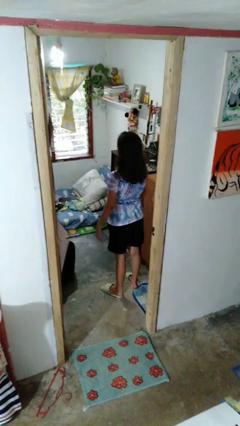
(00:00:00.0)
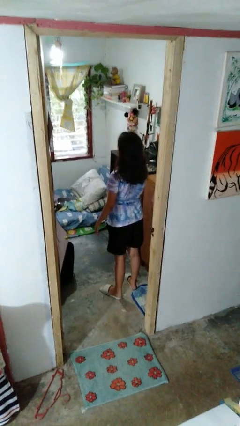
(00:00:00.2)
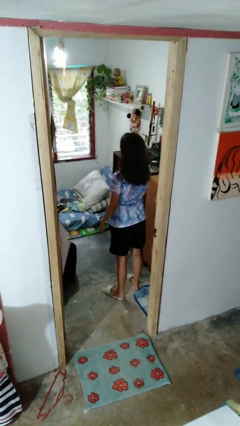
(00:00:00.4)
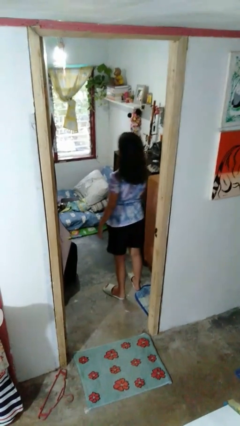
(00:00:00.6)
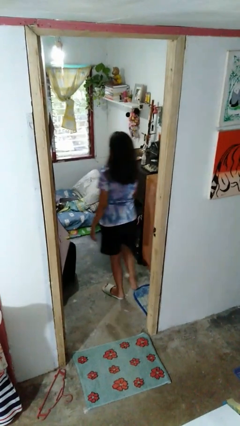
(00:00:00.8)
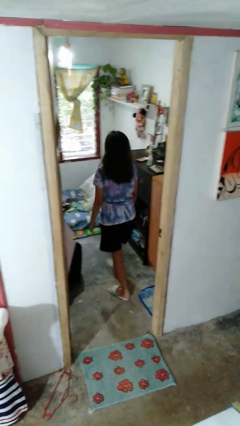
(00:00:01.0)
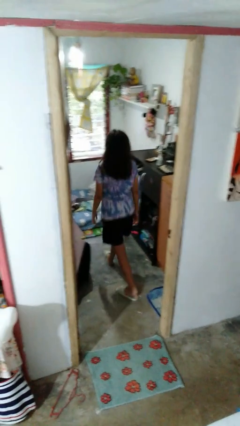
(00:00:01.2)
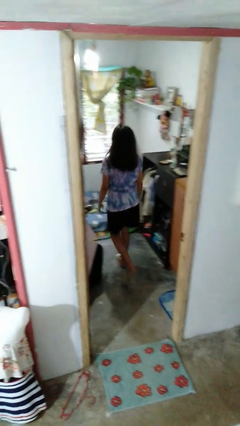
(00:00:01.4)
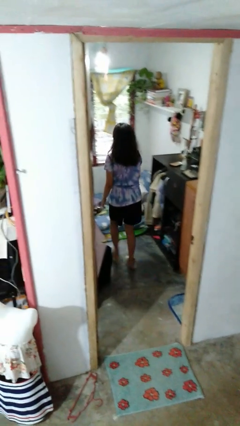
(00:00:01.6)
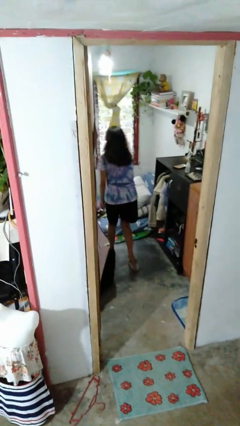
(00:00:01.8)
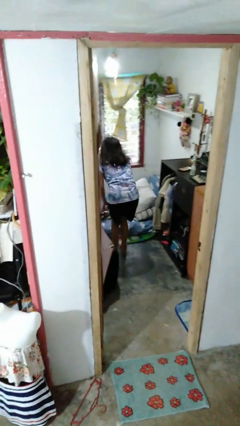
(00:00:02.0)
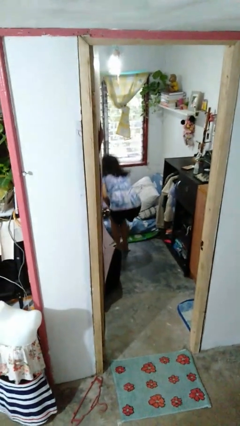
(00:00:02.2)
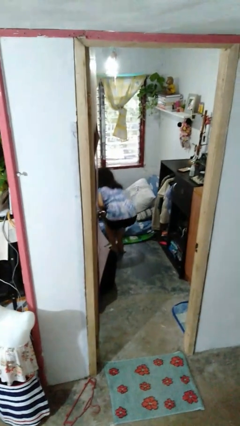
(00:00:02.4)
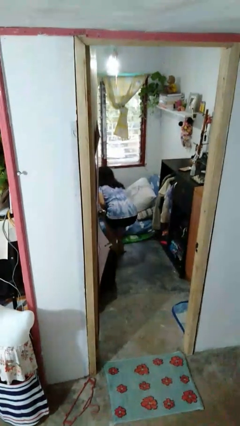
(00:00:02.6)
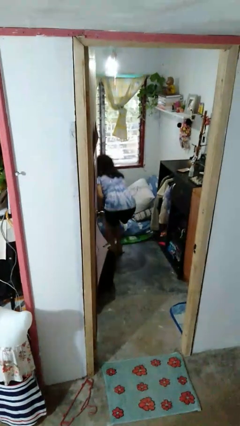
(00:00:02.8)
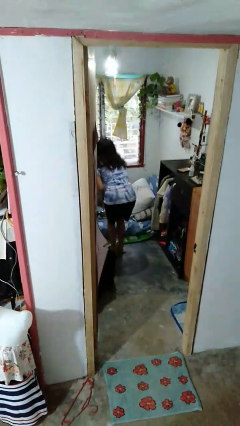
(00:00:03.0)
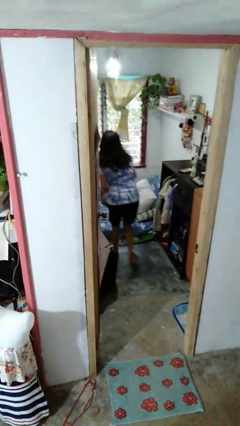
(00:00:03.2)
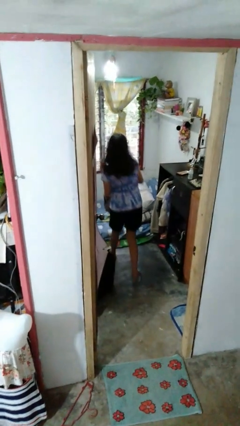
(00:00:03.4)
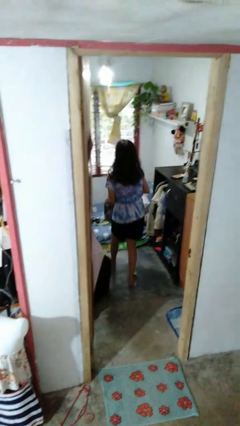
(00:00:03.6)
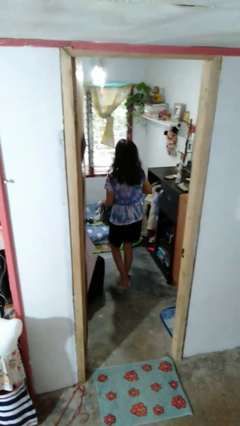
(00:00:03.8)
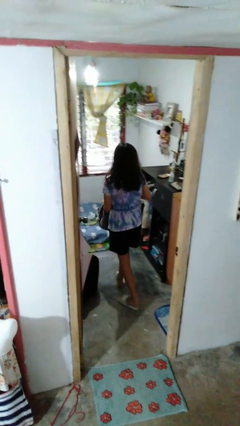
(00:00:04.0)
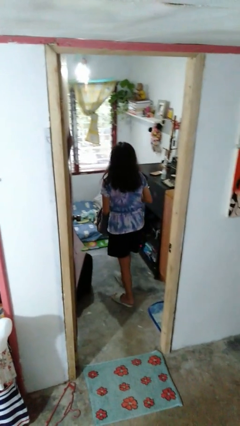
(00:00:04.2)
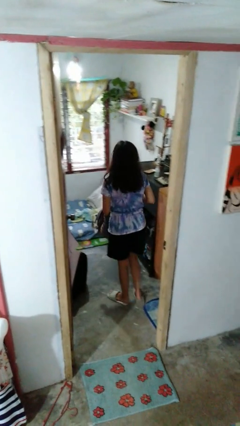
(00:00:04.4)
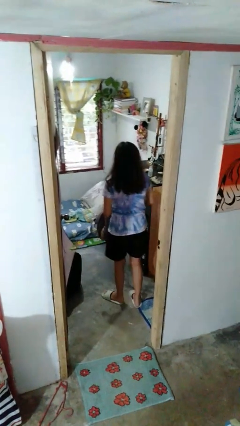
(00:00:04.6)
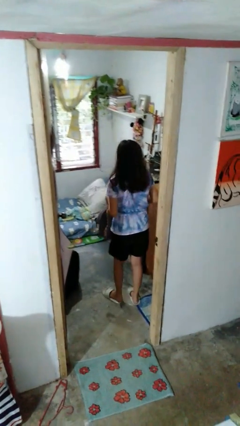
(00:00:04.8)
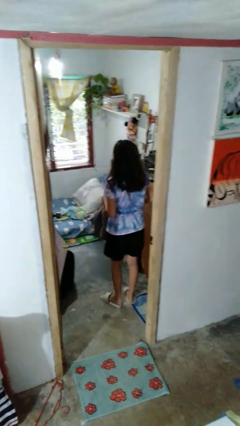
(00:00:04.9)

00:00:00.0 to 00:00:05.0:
person picks up object from bed

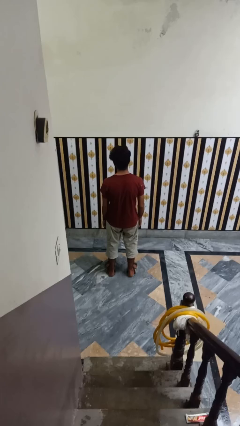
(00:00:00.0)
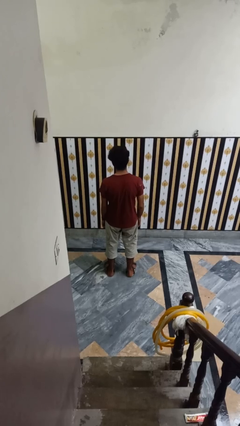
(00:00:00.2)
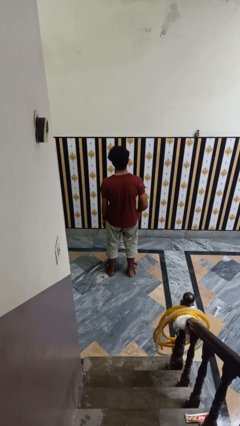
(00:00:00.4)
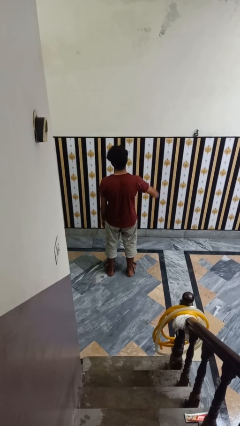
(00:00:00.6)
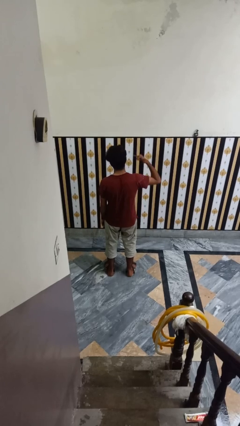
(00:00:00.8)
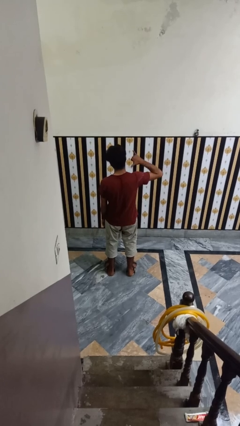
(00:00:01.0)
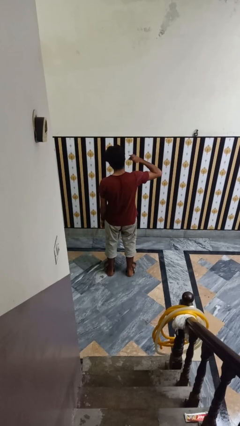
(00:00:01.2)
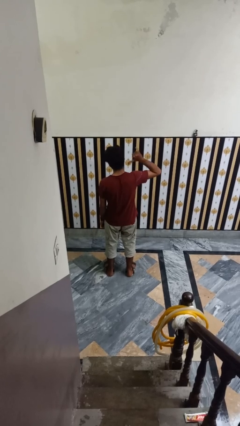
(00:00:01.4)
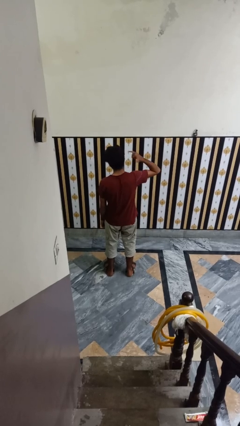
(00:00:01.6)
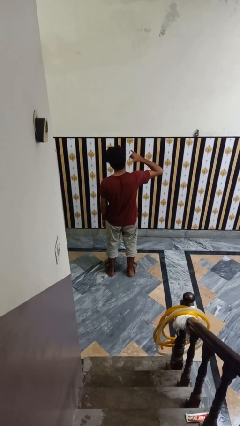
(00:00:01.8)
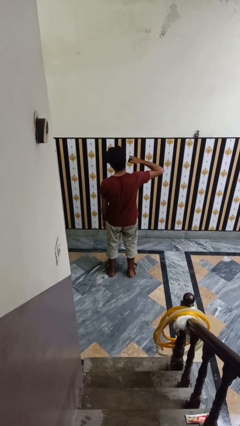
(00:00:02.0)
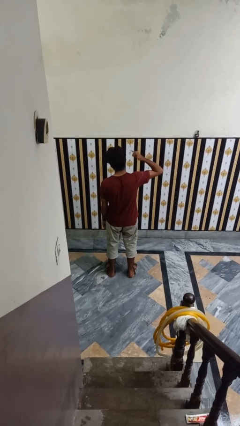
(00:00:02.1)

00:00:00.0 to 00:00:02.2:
person gestures hang loose

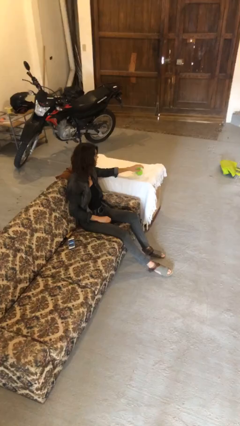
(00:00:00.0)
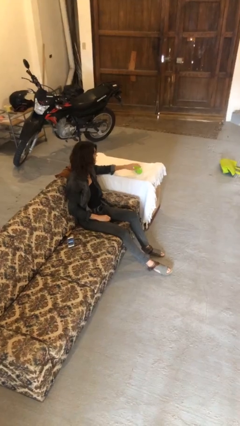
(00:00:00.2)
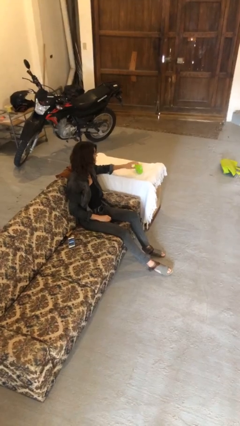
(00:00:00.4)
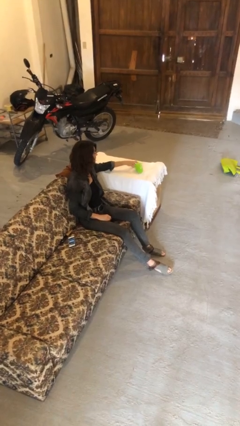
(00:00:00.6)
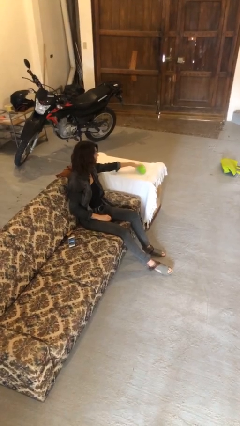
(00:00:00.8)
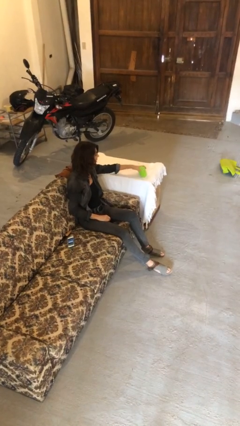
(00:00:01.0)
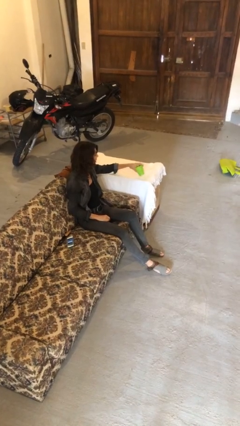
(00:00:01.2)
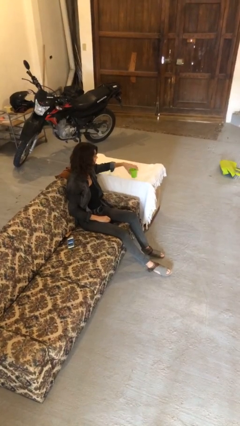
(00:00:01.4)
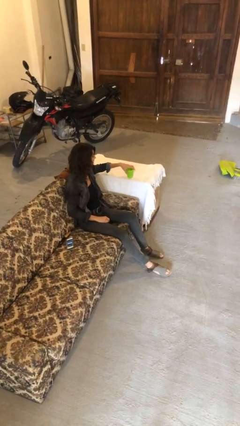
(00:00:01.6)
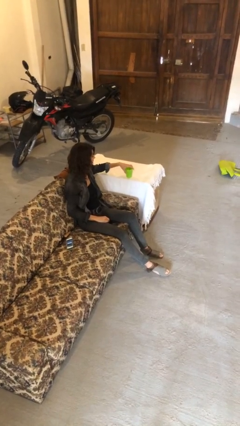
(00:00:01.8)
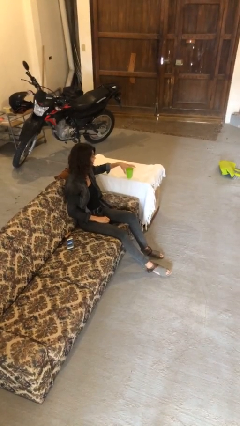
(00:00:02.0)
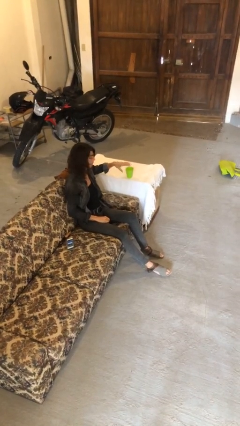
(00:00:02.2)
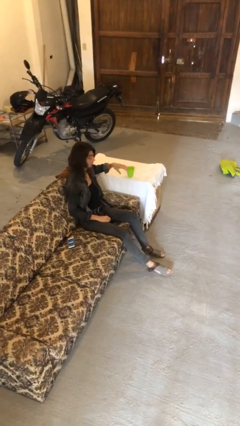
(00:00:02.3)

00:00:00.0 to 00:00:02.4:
person sets upright glass

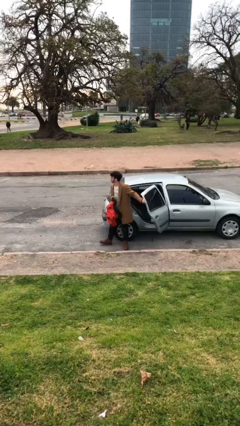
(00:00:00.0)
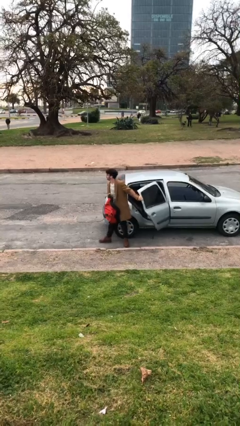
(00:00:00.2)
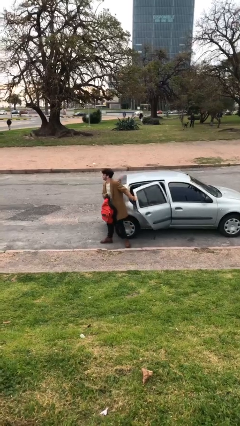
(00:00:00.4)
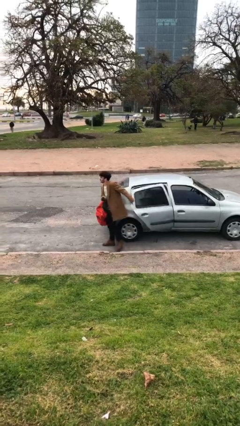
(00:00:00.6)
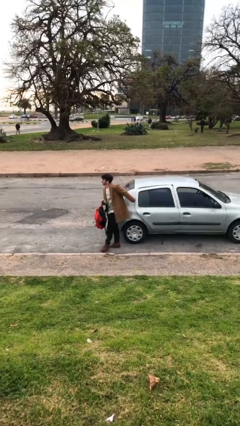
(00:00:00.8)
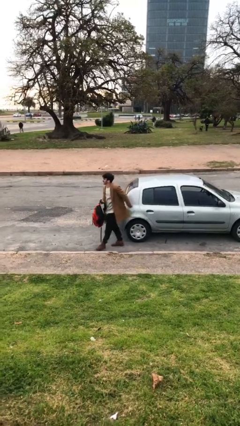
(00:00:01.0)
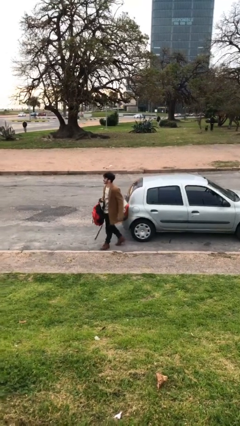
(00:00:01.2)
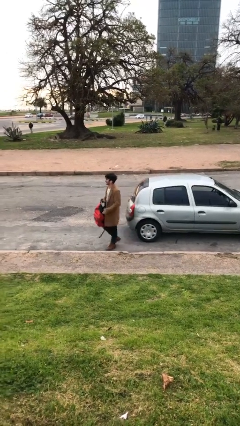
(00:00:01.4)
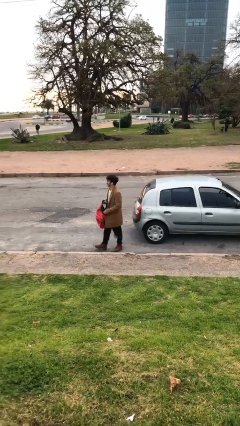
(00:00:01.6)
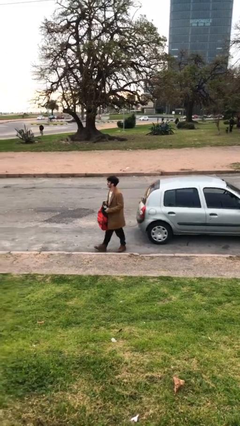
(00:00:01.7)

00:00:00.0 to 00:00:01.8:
person closes car door

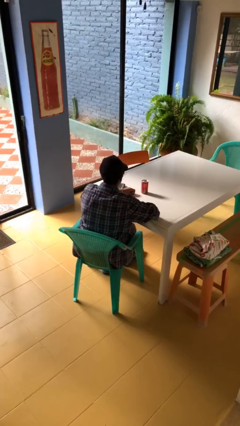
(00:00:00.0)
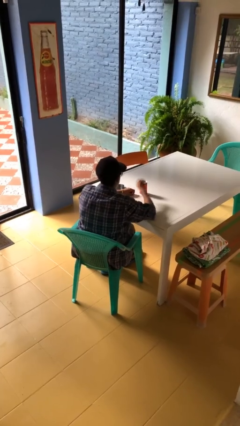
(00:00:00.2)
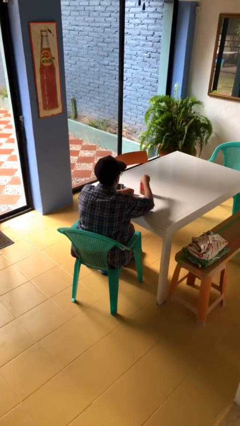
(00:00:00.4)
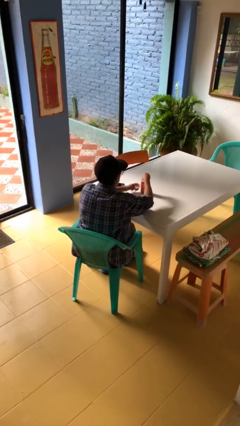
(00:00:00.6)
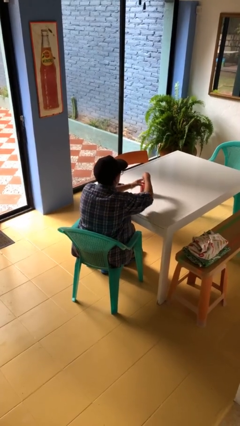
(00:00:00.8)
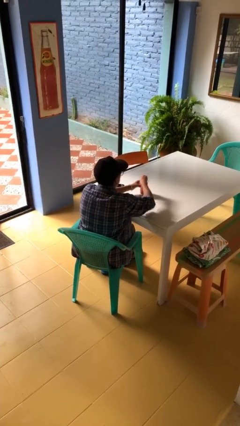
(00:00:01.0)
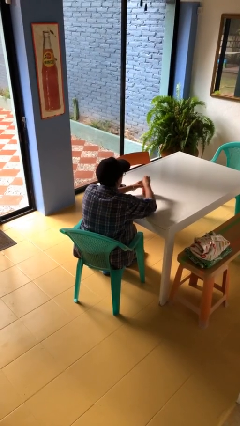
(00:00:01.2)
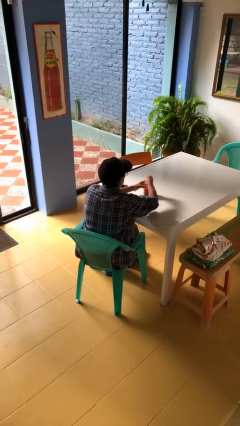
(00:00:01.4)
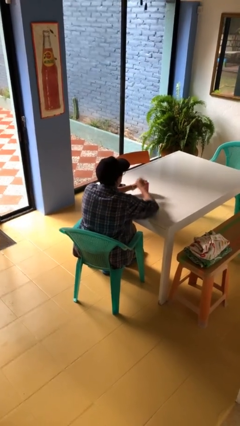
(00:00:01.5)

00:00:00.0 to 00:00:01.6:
person opens beverage can

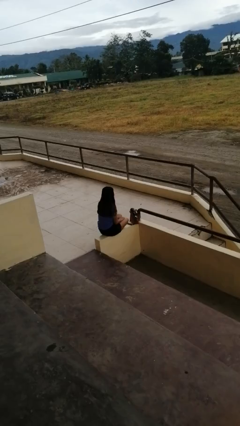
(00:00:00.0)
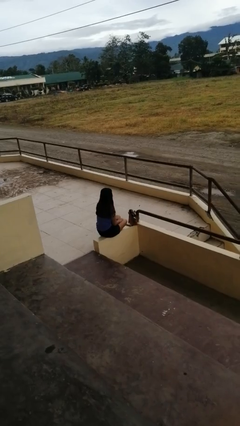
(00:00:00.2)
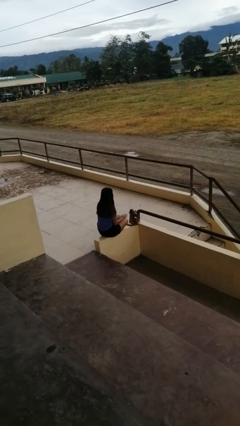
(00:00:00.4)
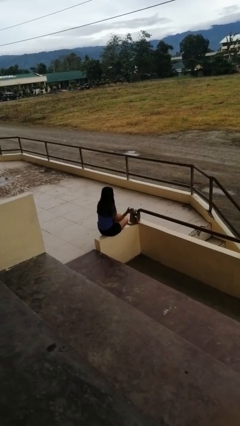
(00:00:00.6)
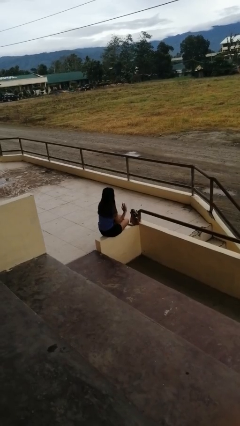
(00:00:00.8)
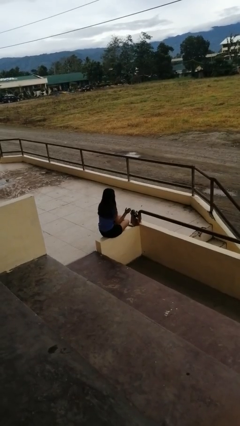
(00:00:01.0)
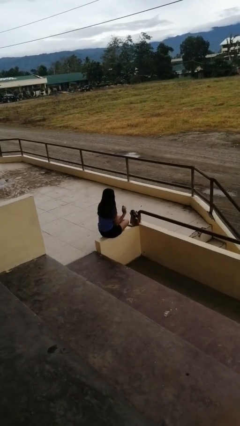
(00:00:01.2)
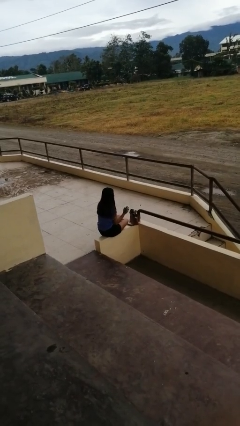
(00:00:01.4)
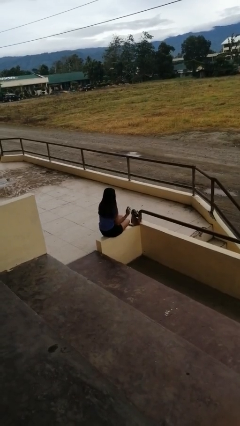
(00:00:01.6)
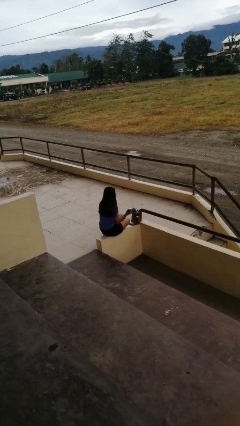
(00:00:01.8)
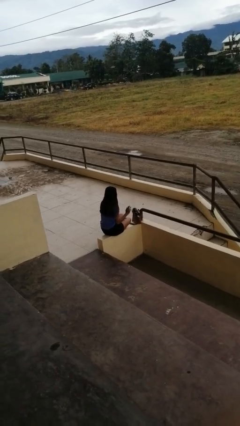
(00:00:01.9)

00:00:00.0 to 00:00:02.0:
person waves hand over object

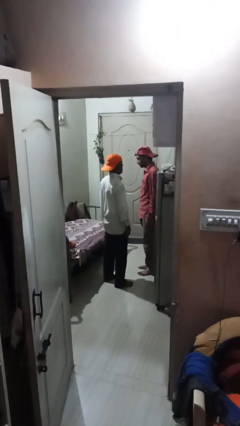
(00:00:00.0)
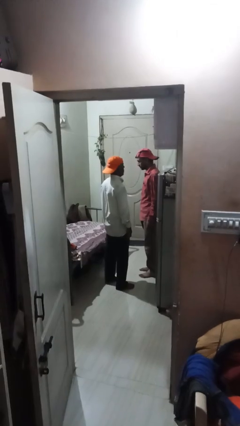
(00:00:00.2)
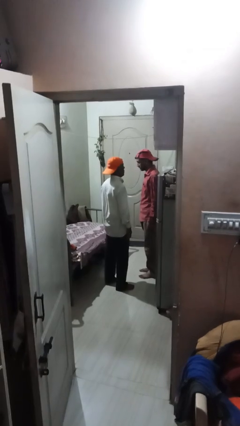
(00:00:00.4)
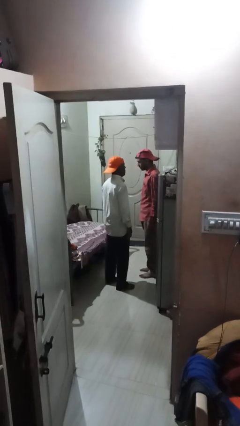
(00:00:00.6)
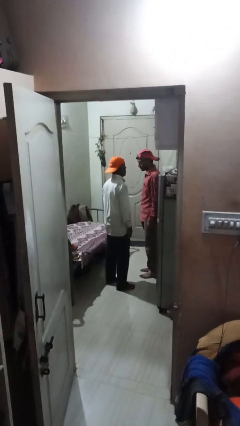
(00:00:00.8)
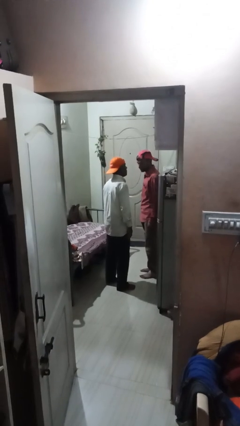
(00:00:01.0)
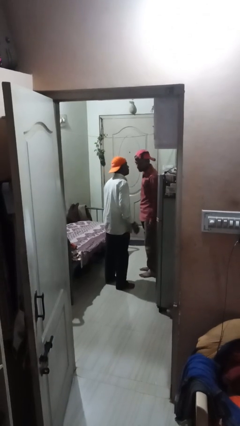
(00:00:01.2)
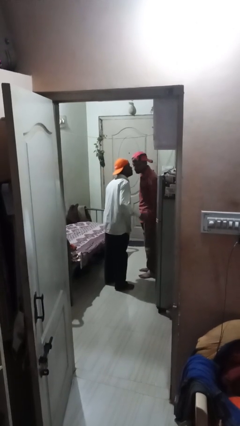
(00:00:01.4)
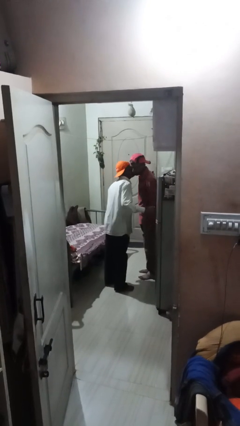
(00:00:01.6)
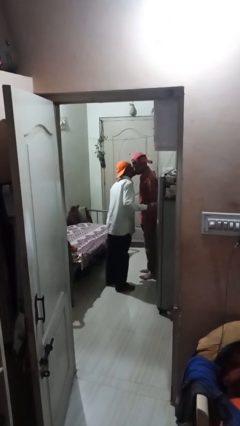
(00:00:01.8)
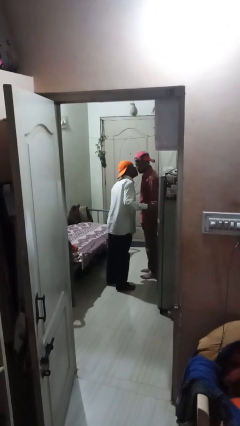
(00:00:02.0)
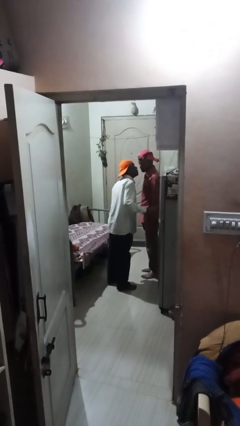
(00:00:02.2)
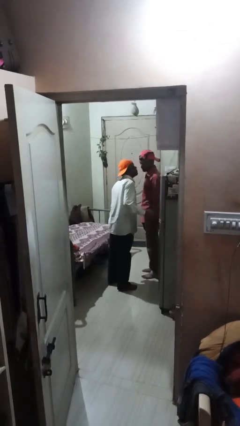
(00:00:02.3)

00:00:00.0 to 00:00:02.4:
person kisses cheek of person
